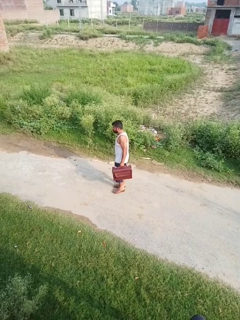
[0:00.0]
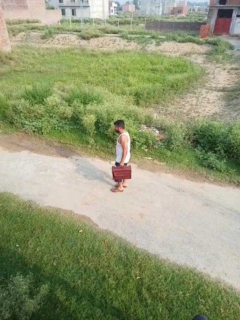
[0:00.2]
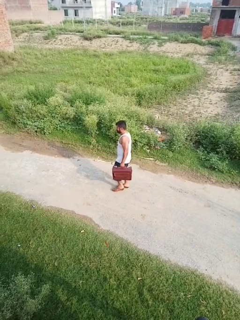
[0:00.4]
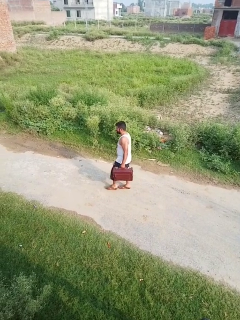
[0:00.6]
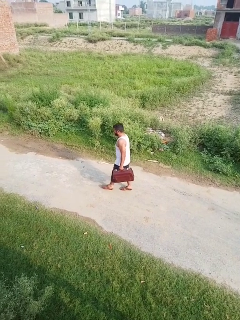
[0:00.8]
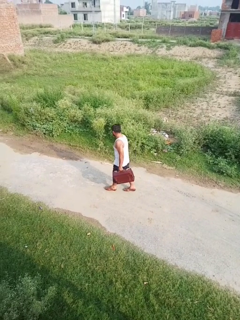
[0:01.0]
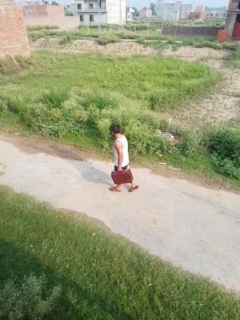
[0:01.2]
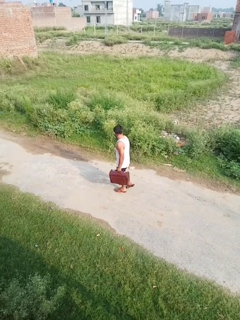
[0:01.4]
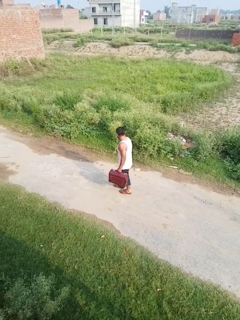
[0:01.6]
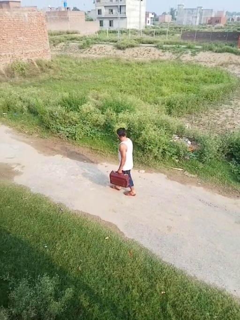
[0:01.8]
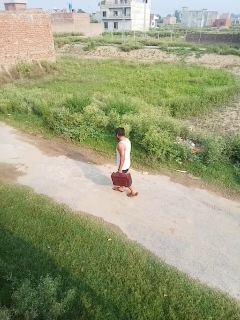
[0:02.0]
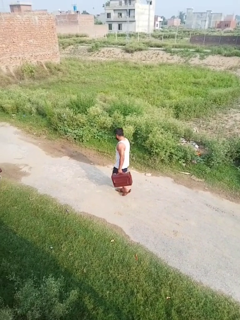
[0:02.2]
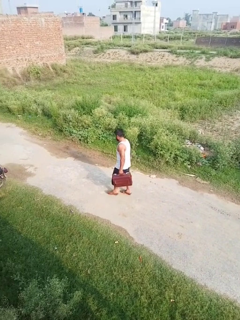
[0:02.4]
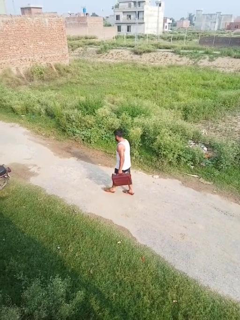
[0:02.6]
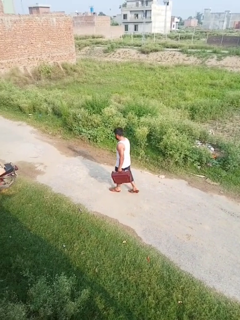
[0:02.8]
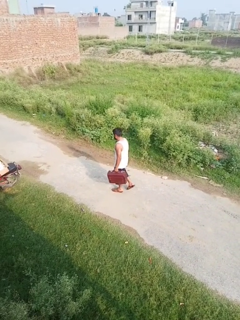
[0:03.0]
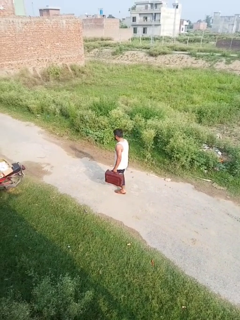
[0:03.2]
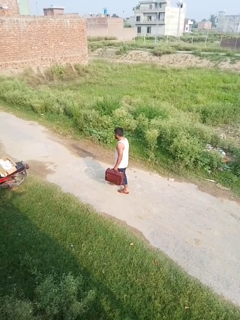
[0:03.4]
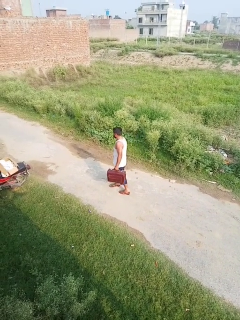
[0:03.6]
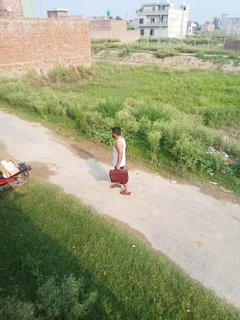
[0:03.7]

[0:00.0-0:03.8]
person carries groceries

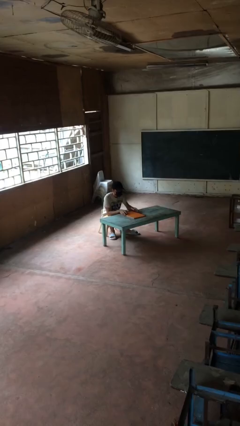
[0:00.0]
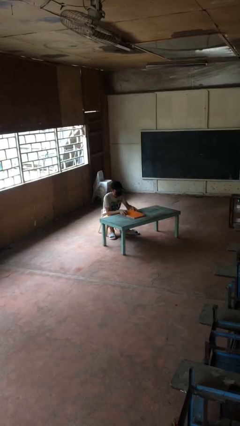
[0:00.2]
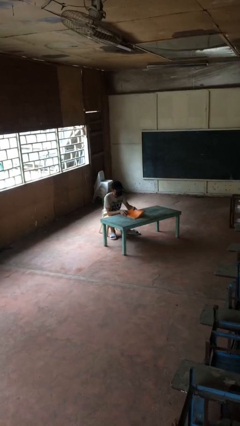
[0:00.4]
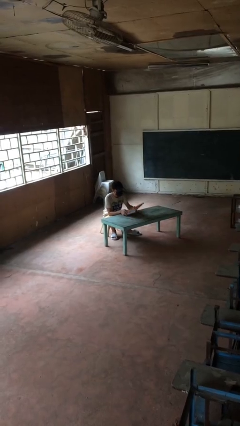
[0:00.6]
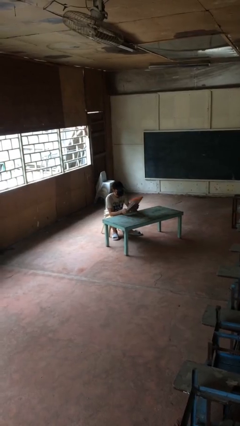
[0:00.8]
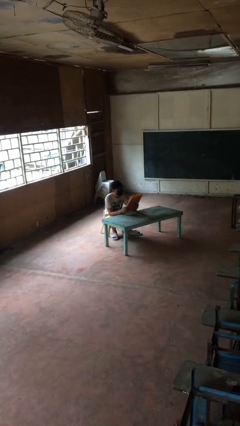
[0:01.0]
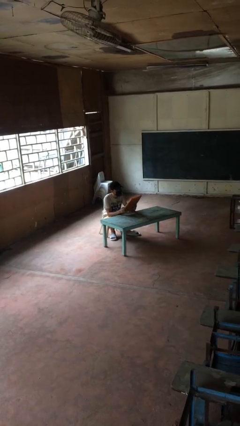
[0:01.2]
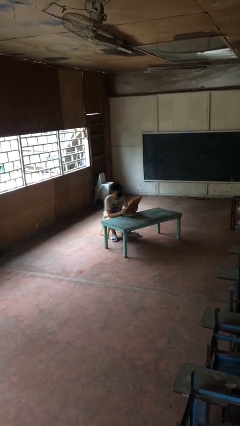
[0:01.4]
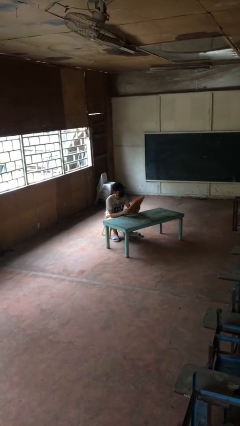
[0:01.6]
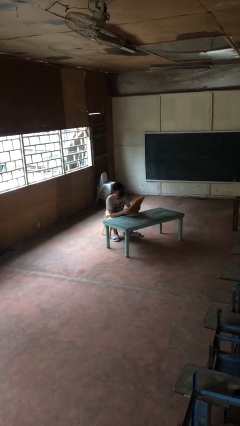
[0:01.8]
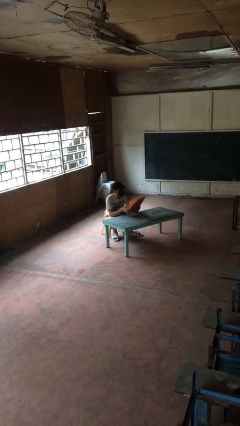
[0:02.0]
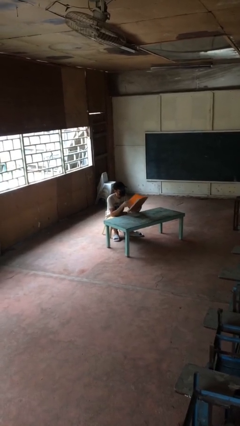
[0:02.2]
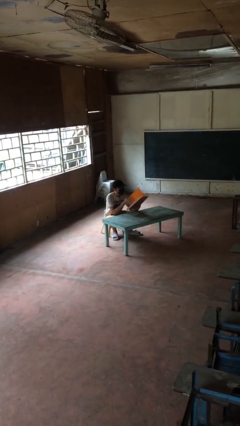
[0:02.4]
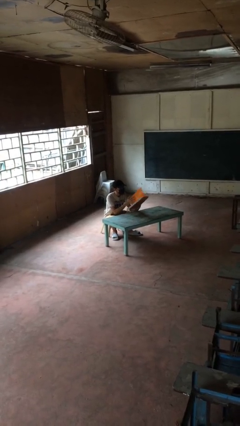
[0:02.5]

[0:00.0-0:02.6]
person picks up object from table

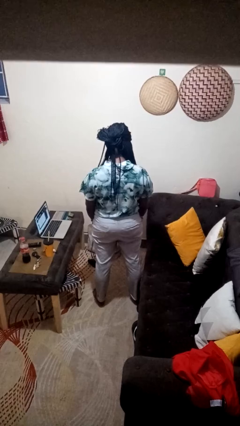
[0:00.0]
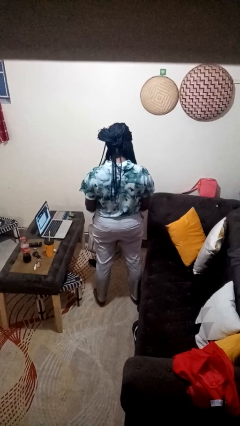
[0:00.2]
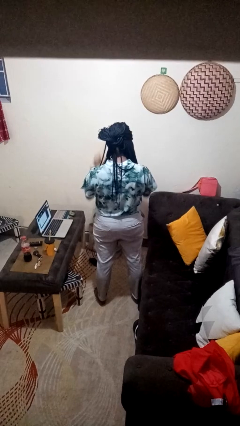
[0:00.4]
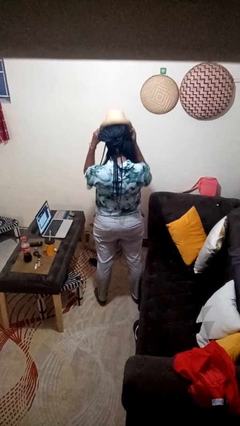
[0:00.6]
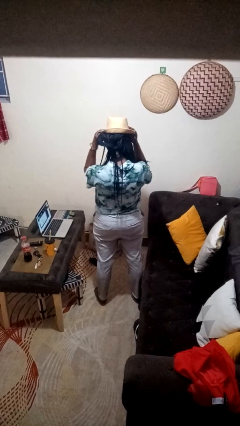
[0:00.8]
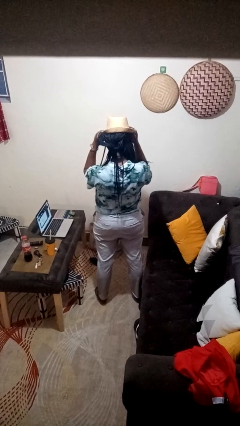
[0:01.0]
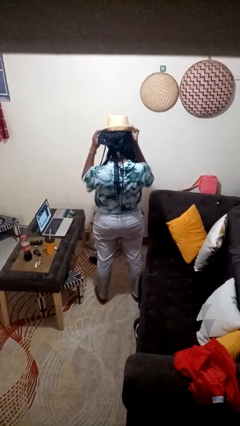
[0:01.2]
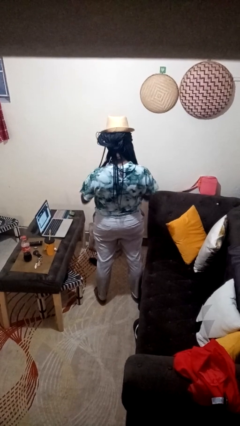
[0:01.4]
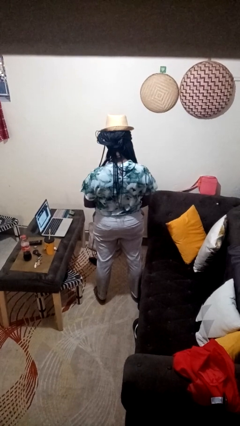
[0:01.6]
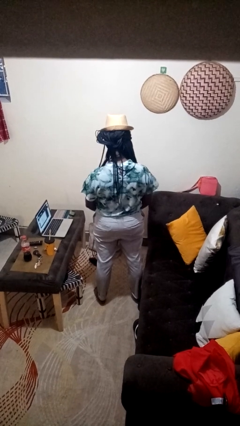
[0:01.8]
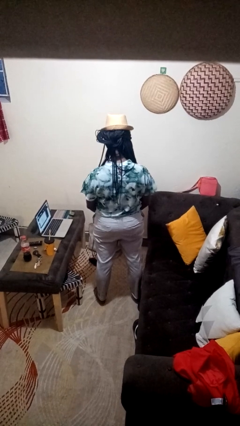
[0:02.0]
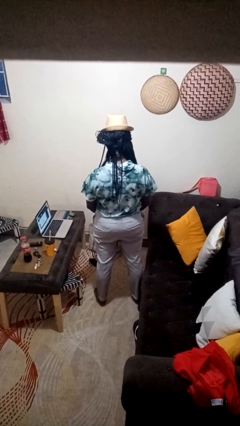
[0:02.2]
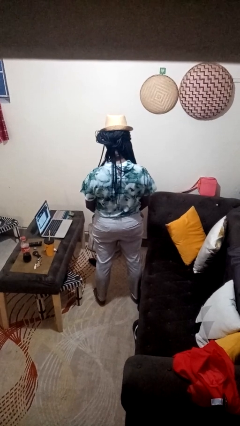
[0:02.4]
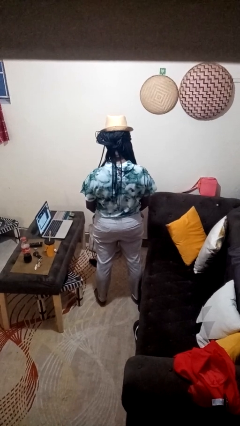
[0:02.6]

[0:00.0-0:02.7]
person puts on hat

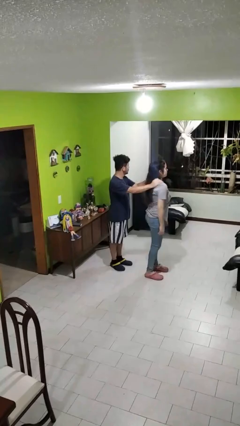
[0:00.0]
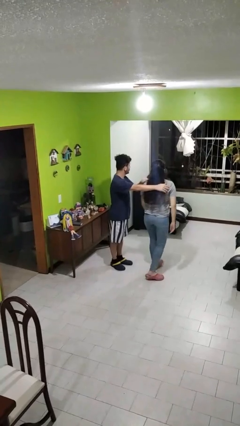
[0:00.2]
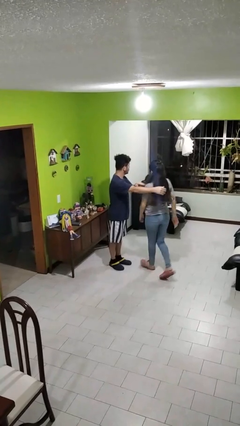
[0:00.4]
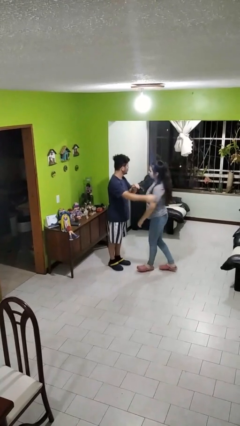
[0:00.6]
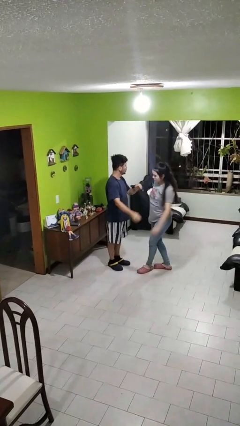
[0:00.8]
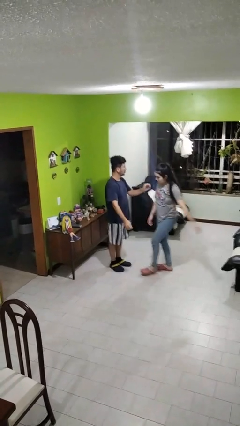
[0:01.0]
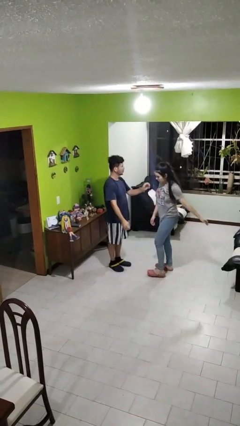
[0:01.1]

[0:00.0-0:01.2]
person spins person around

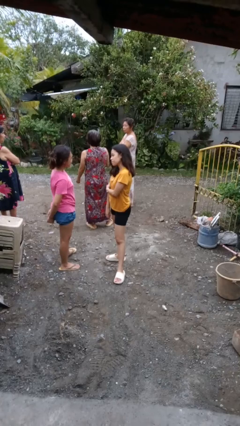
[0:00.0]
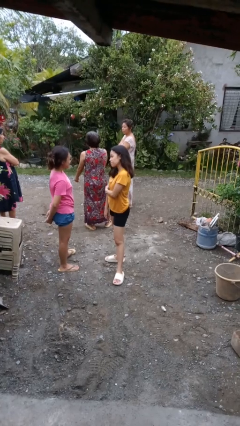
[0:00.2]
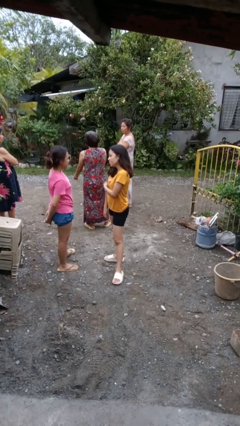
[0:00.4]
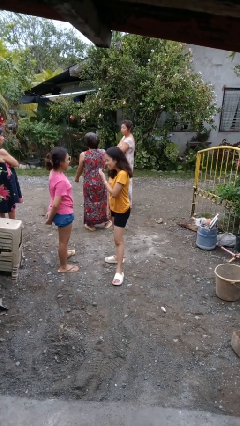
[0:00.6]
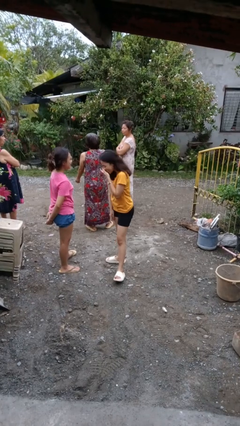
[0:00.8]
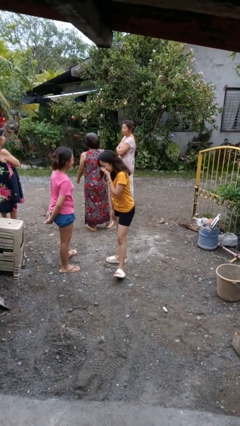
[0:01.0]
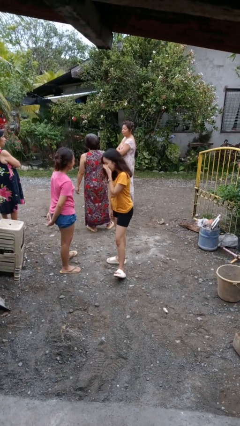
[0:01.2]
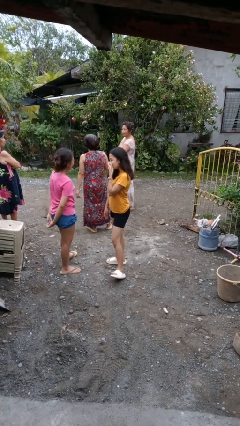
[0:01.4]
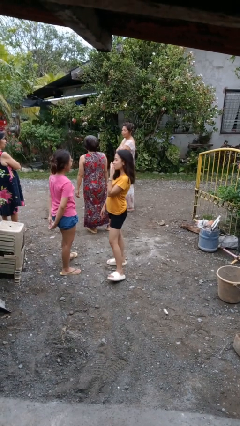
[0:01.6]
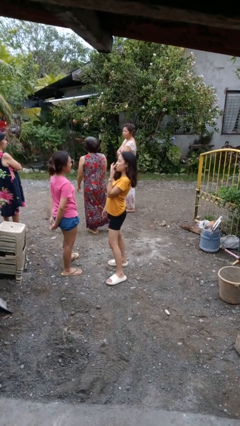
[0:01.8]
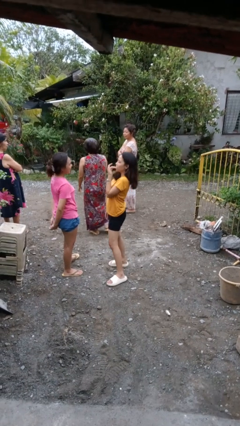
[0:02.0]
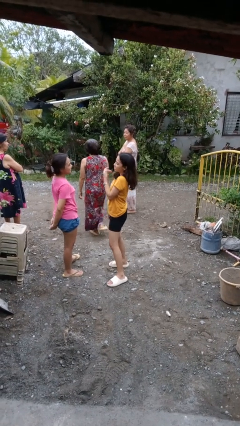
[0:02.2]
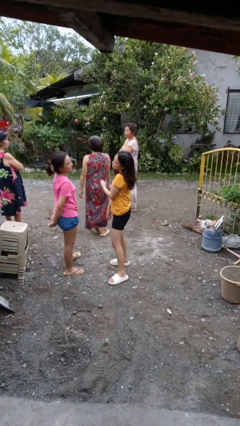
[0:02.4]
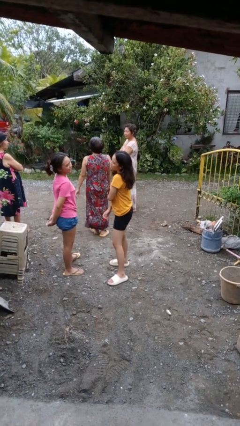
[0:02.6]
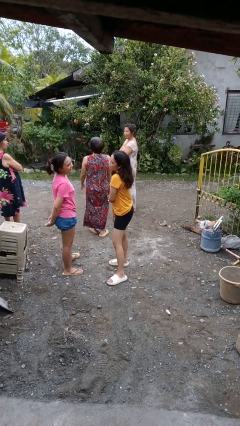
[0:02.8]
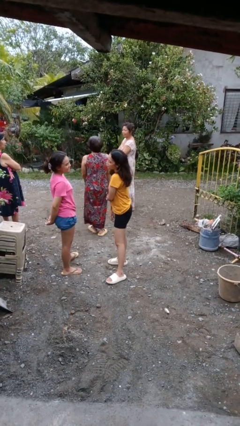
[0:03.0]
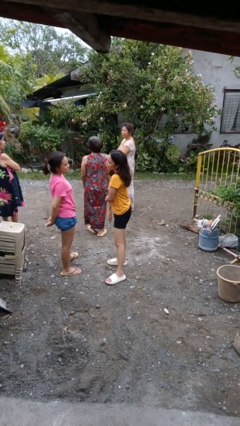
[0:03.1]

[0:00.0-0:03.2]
person laughs with person

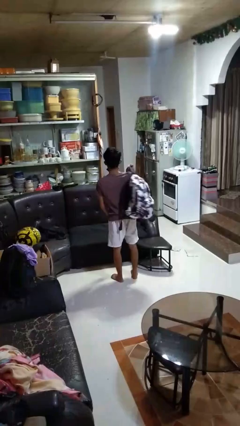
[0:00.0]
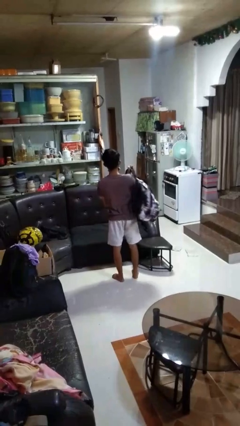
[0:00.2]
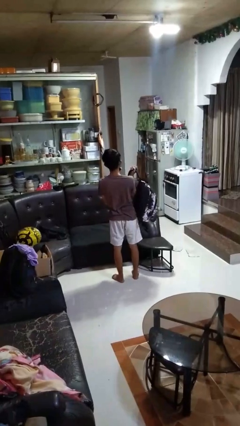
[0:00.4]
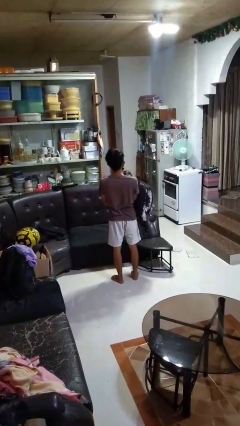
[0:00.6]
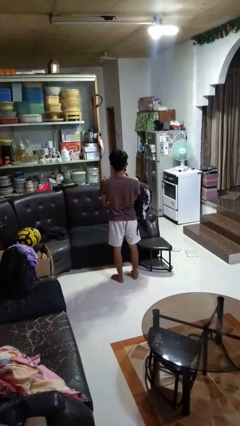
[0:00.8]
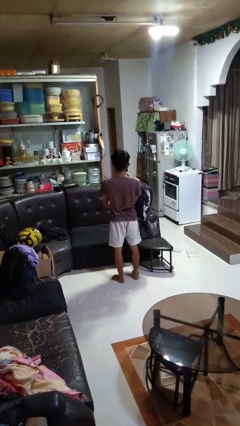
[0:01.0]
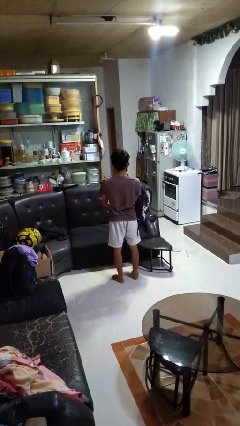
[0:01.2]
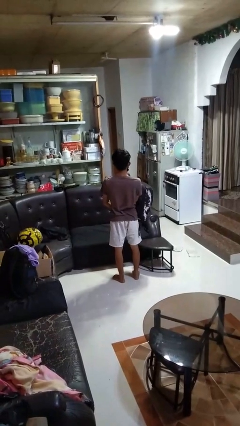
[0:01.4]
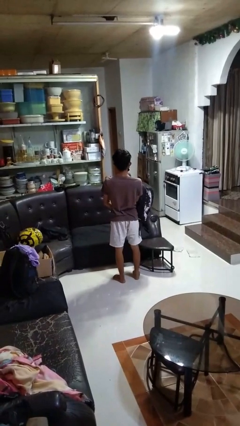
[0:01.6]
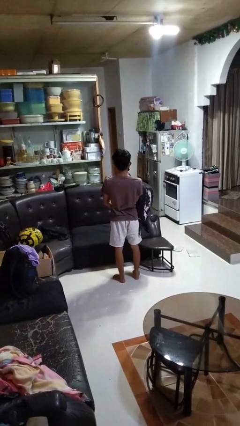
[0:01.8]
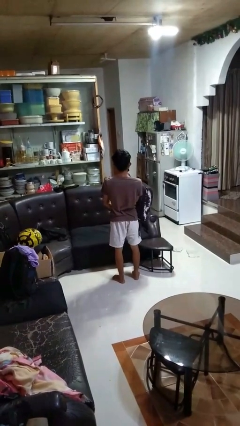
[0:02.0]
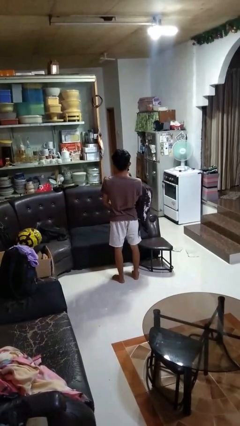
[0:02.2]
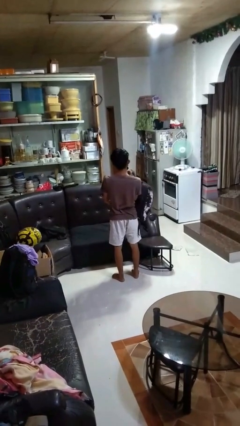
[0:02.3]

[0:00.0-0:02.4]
person takes off backpack

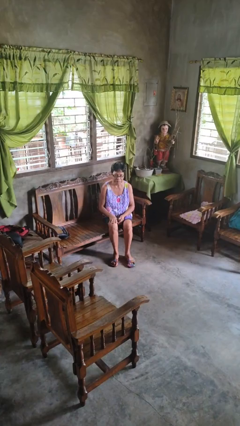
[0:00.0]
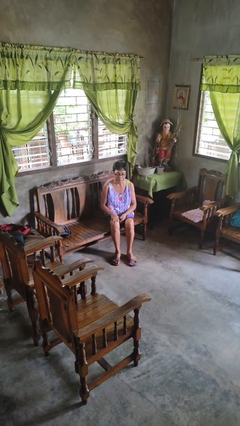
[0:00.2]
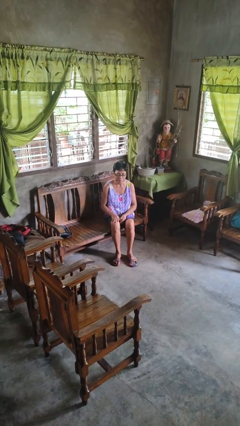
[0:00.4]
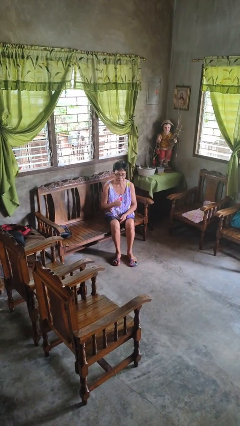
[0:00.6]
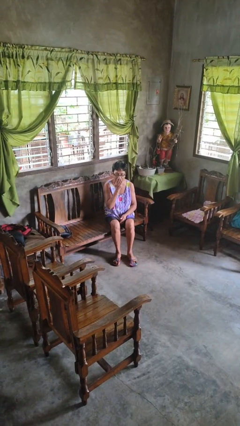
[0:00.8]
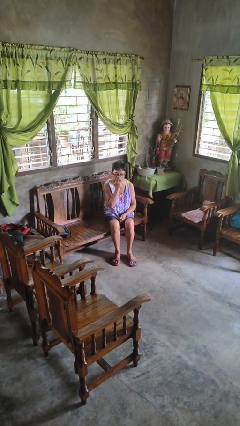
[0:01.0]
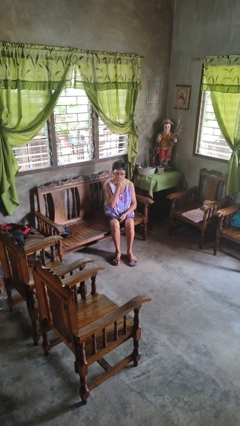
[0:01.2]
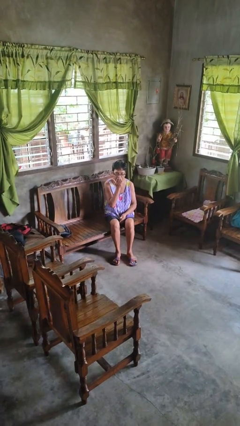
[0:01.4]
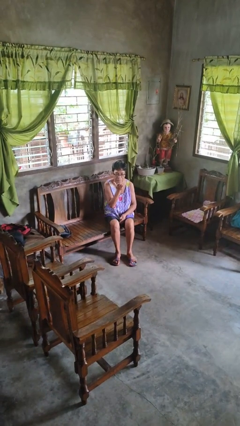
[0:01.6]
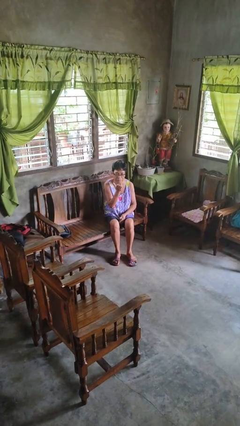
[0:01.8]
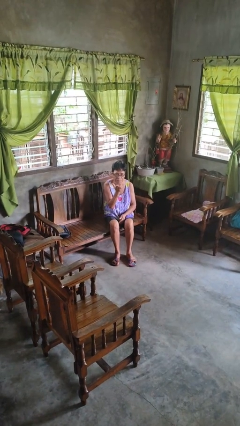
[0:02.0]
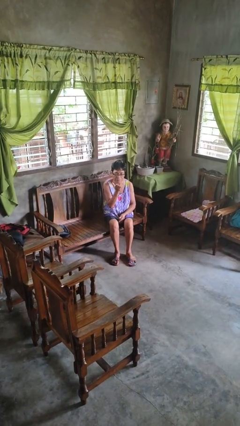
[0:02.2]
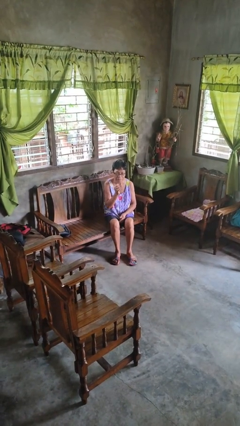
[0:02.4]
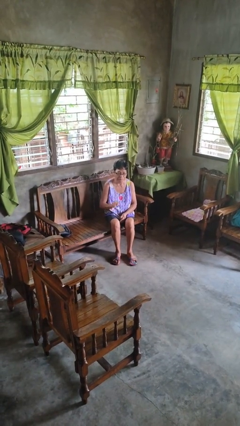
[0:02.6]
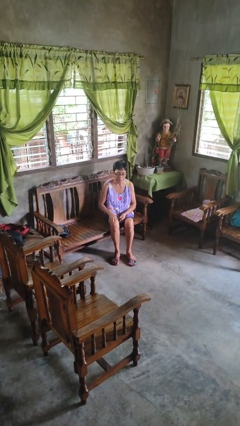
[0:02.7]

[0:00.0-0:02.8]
person gestures blow kiss
